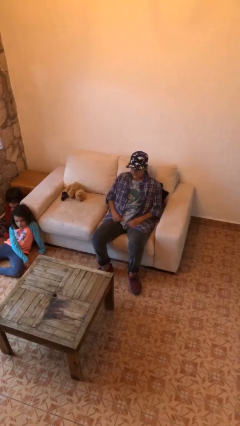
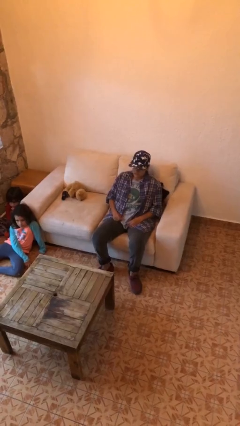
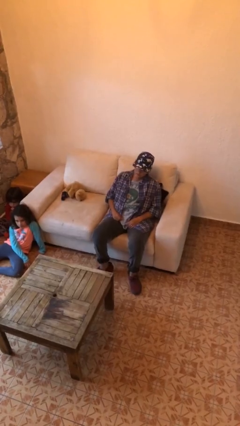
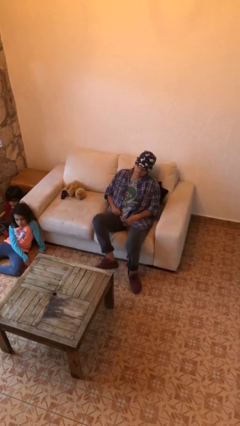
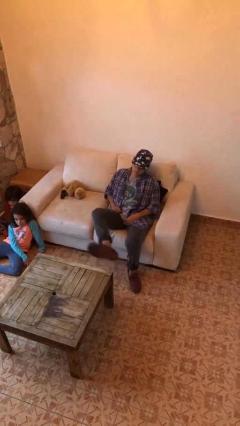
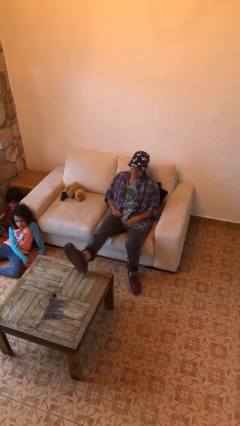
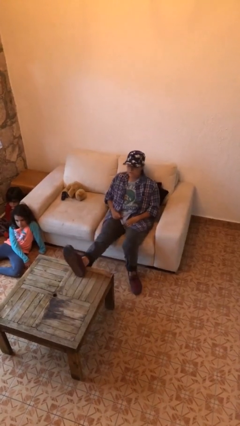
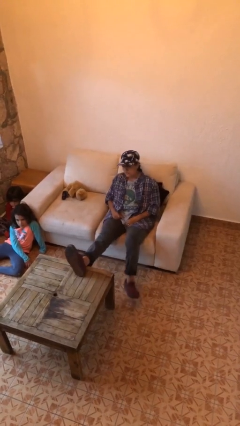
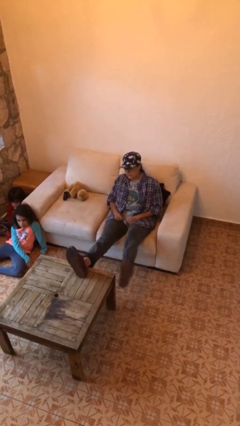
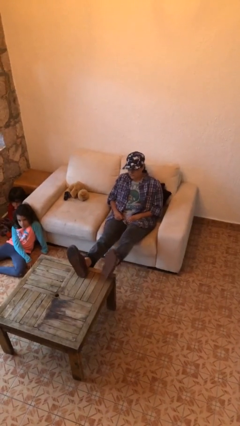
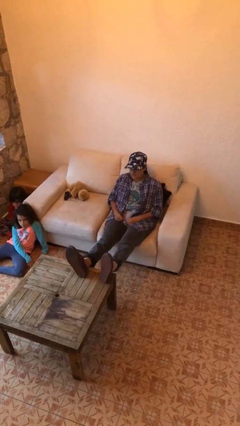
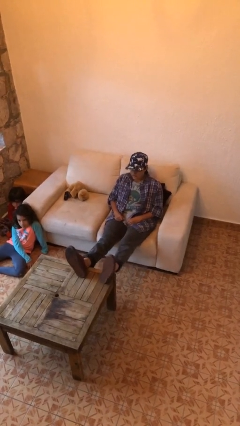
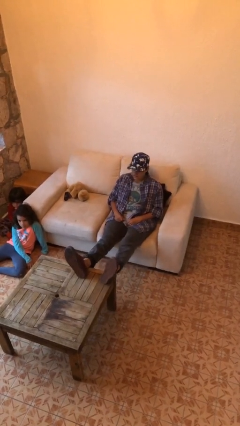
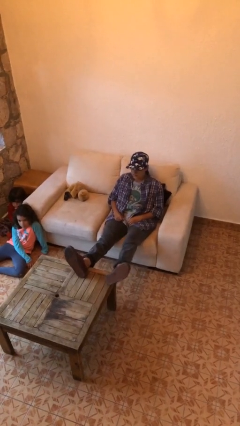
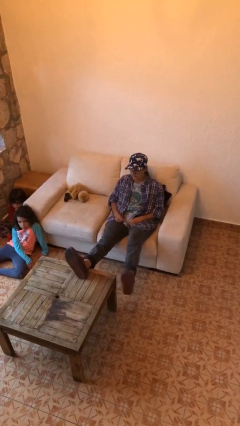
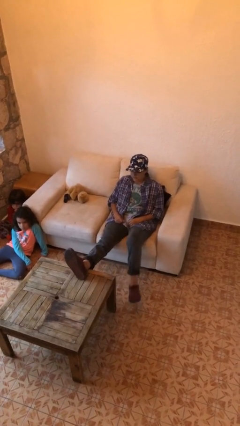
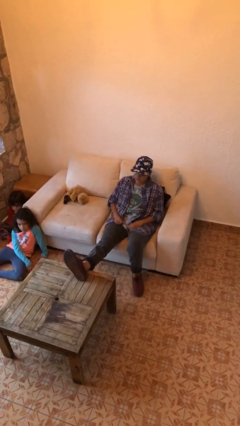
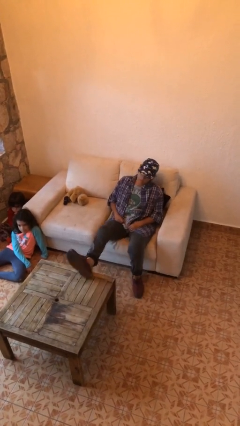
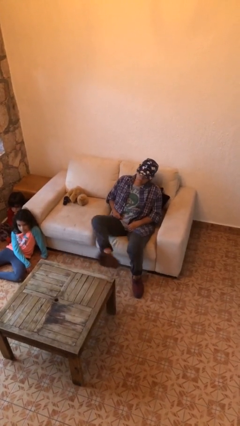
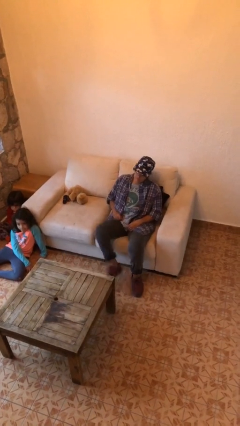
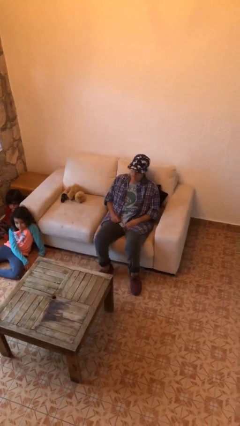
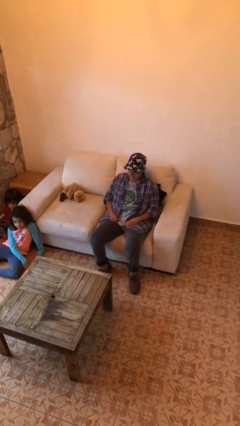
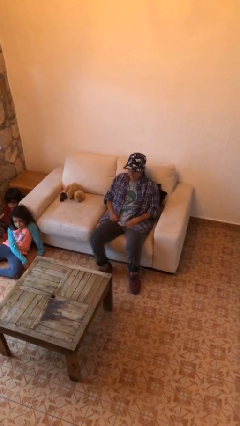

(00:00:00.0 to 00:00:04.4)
person puts feet up

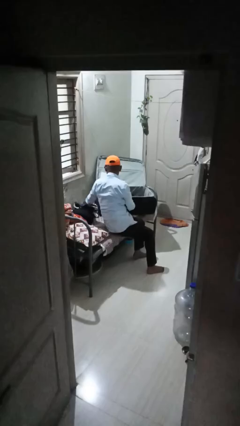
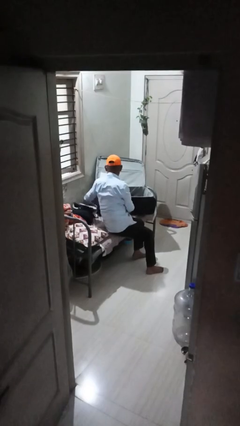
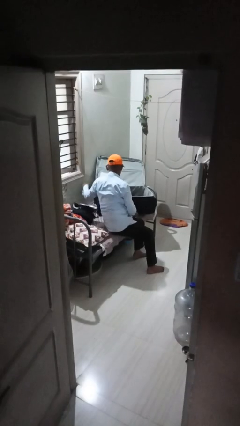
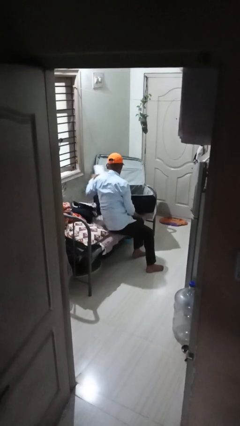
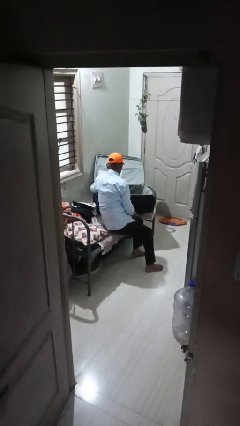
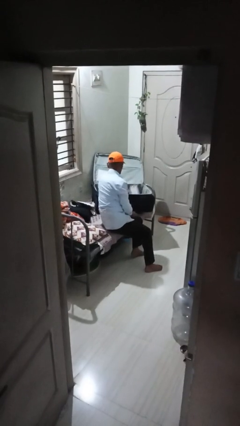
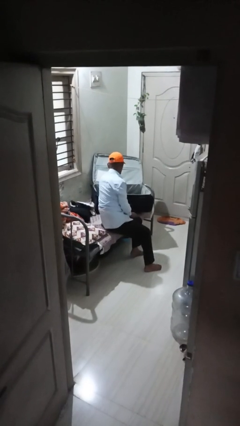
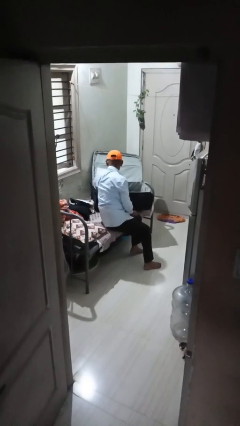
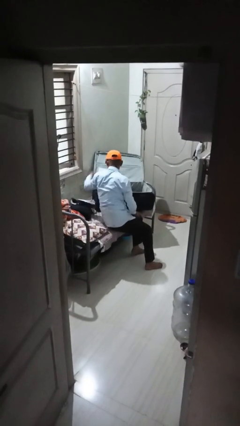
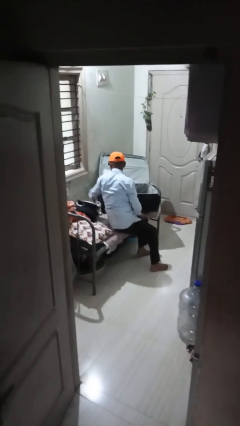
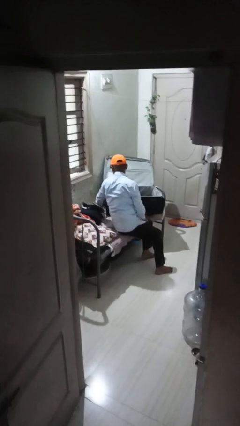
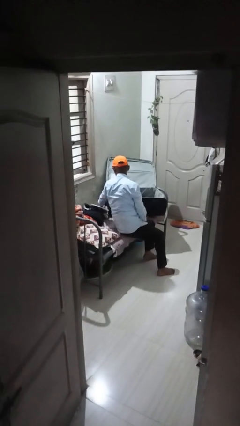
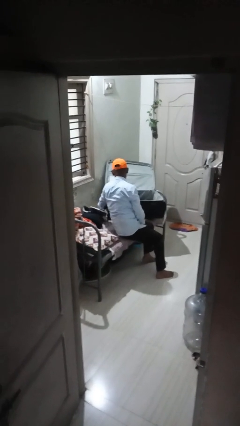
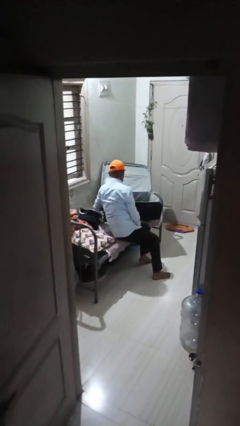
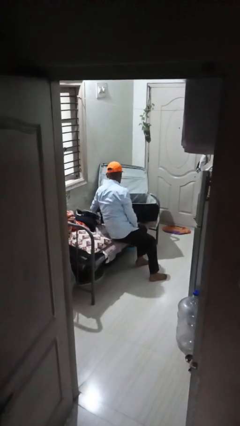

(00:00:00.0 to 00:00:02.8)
person loads clothes into suitcase

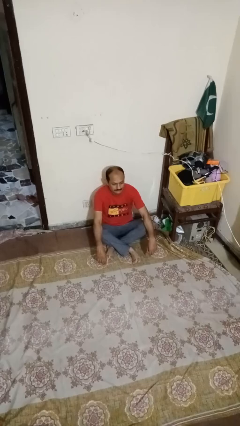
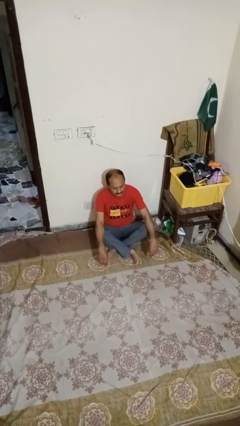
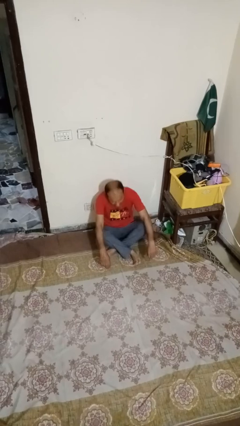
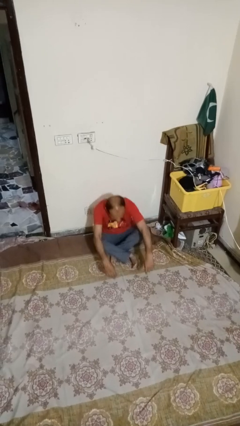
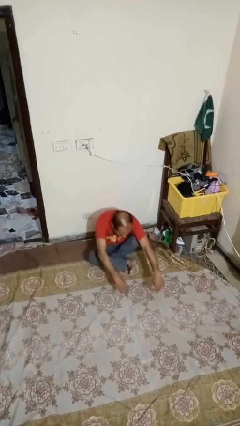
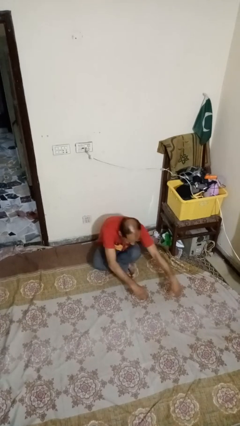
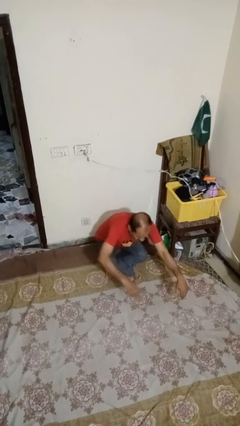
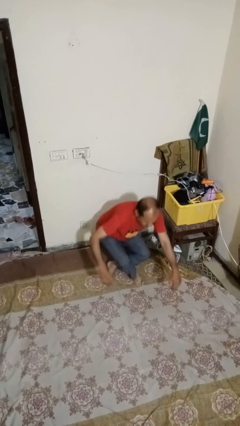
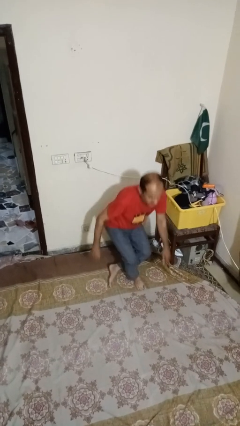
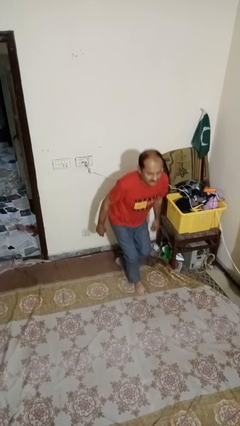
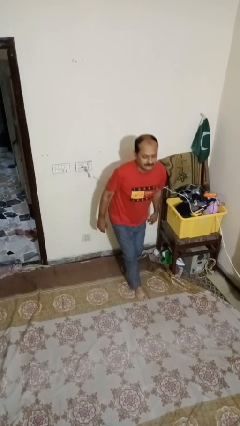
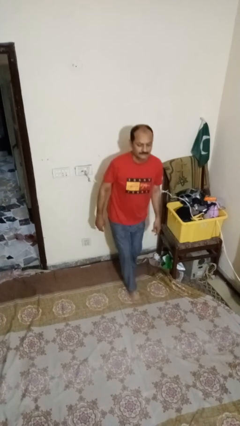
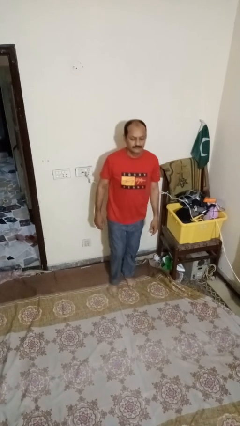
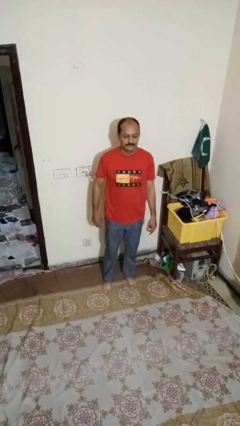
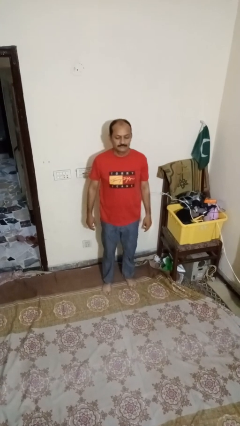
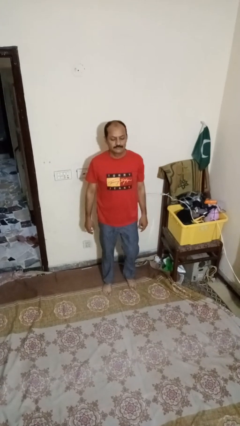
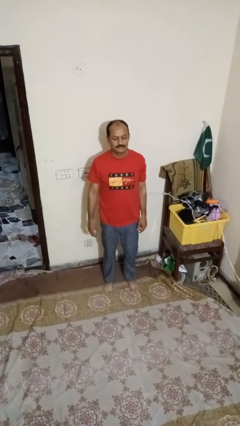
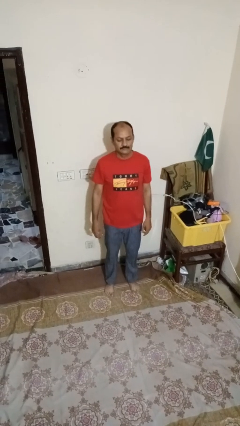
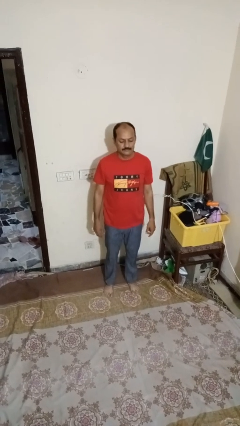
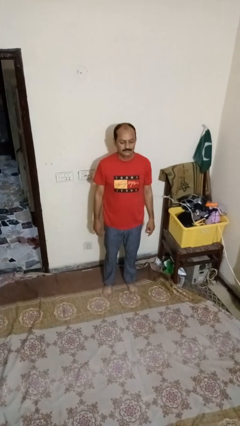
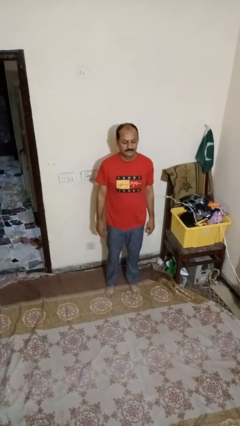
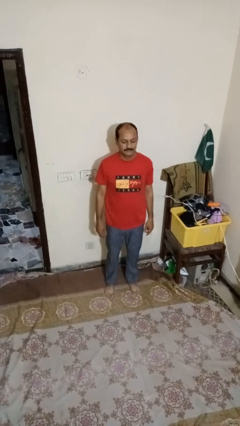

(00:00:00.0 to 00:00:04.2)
person stands up from floor

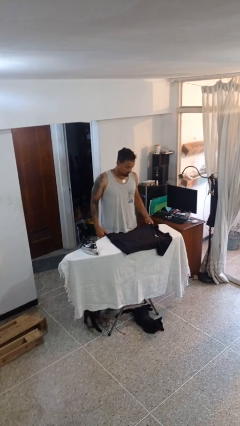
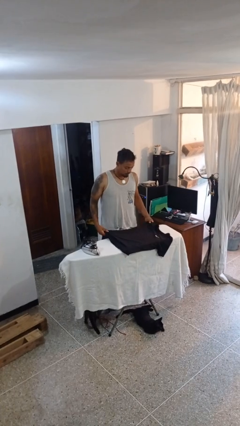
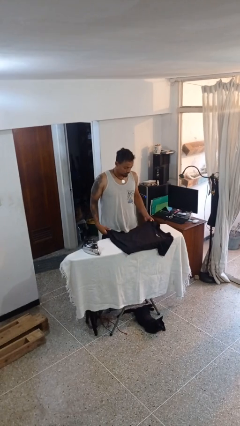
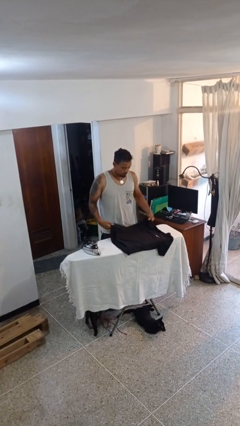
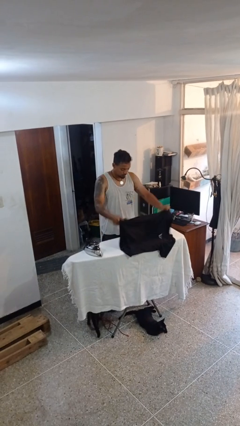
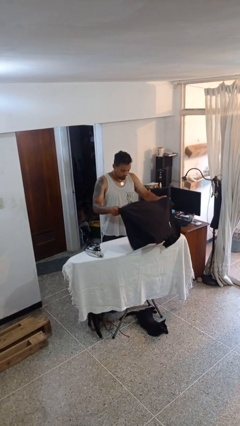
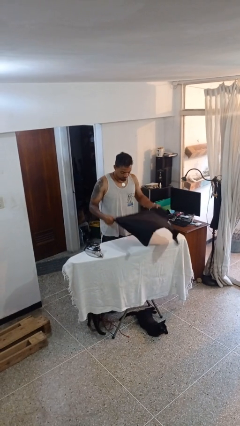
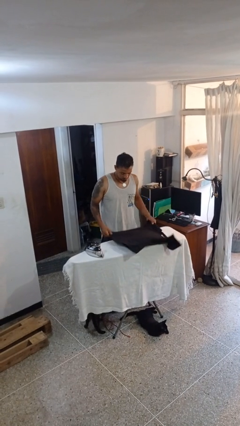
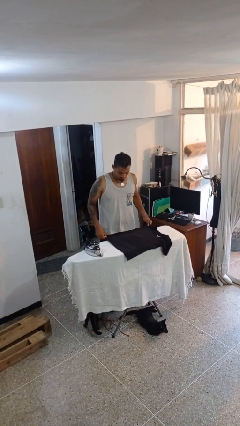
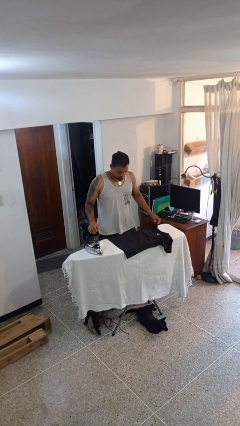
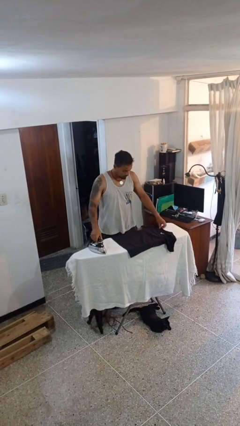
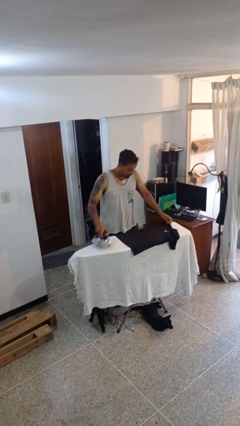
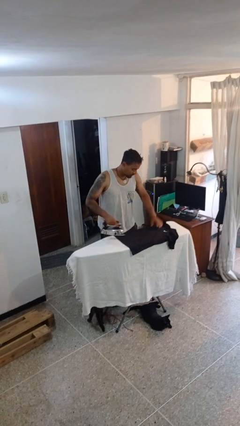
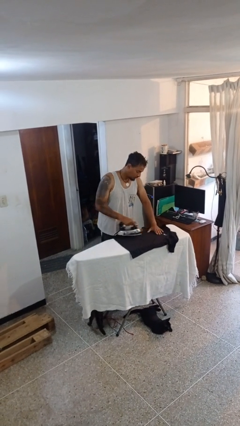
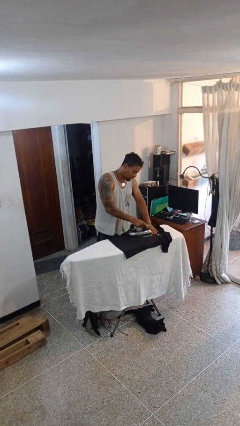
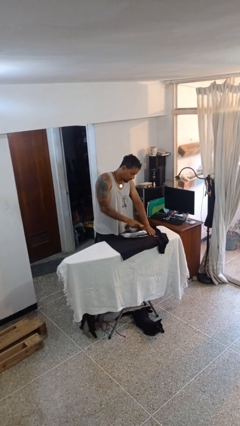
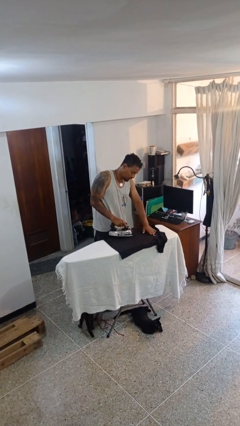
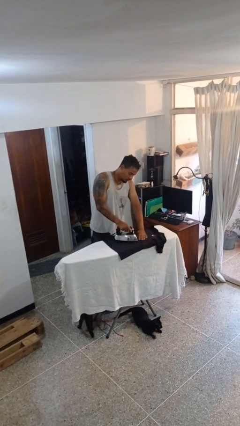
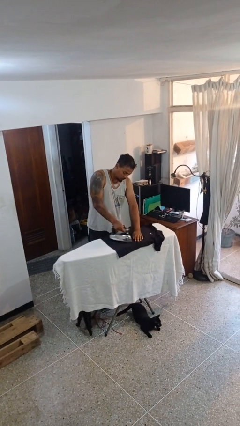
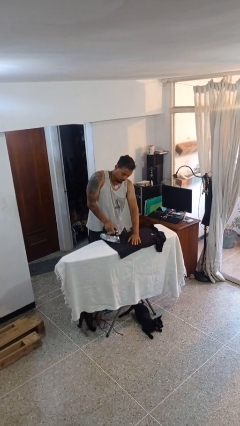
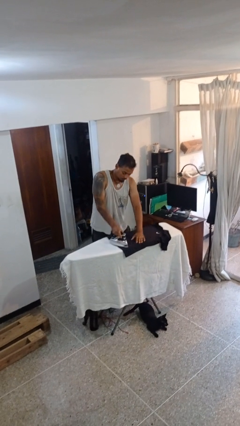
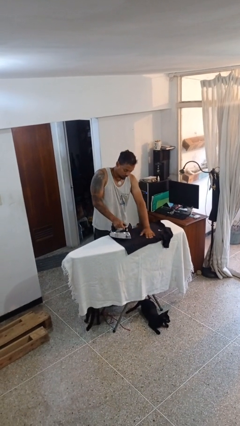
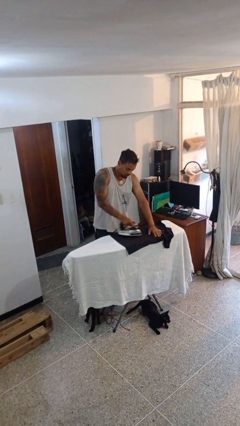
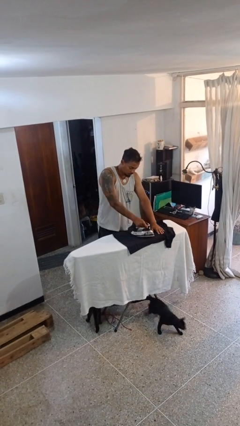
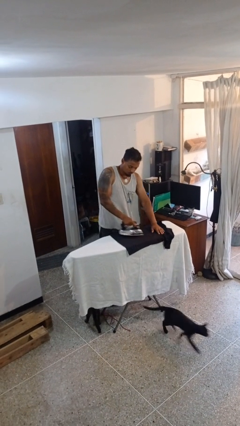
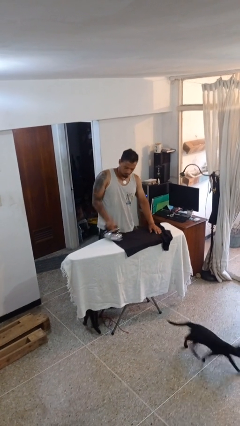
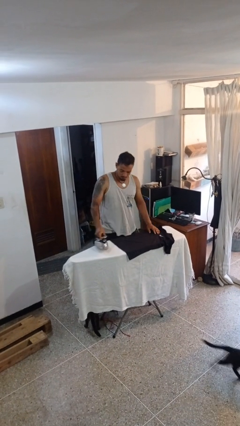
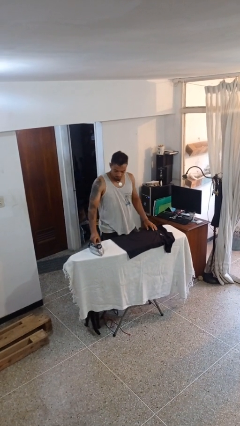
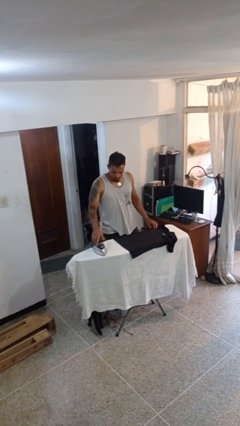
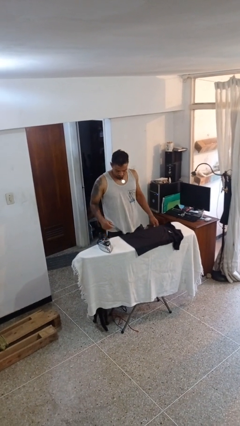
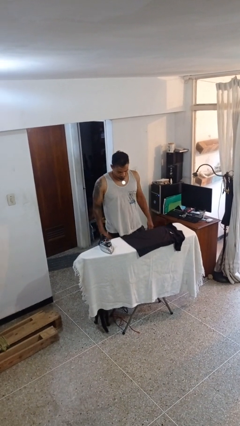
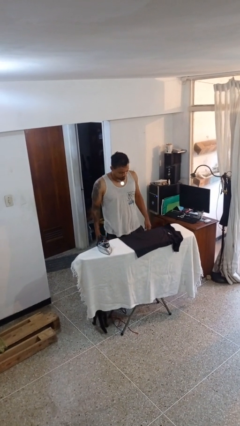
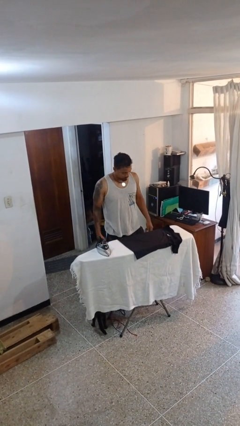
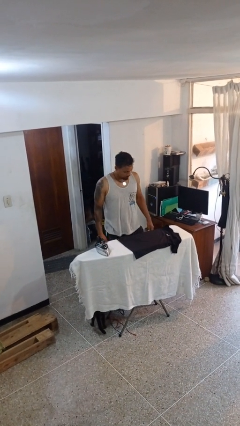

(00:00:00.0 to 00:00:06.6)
person irons clothes
